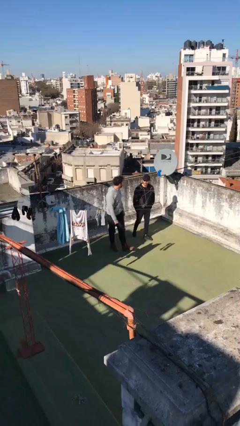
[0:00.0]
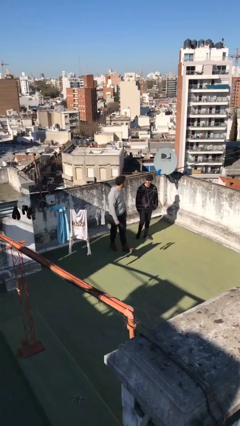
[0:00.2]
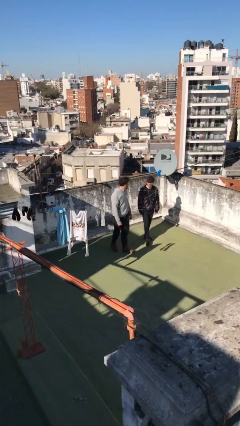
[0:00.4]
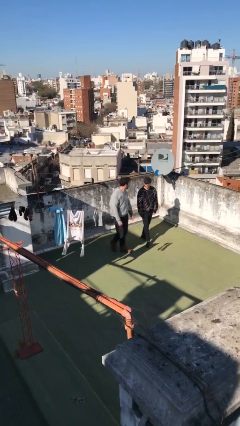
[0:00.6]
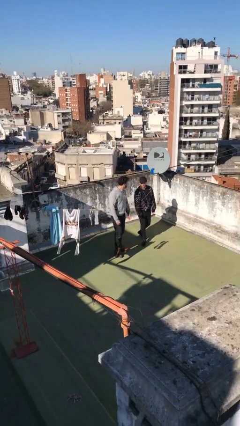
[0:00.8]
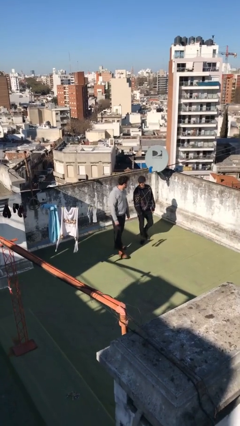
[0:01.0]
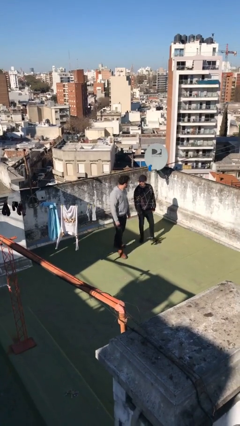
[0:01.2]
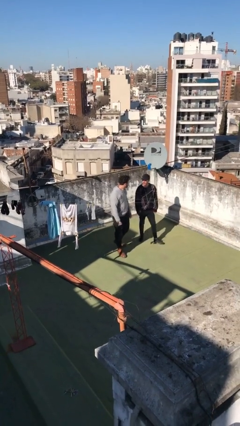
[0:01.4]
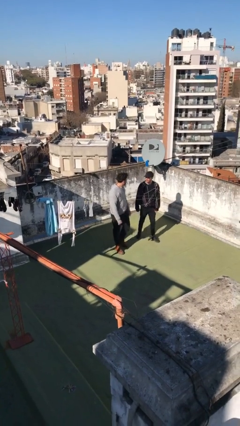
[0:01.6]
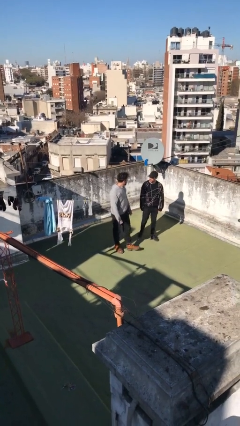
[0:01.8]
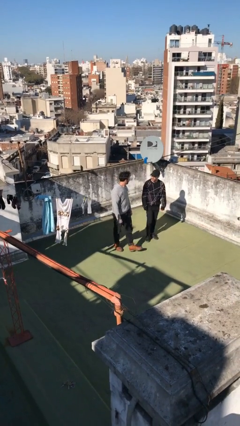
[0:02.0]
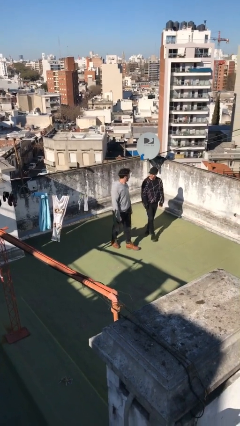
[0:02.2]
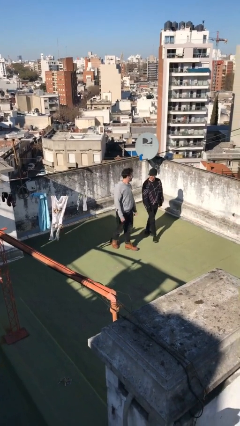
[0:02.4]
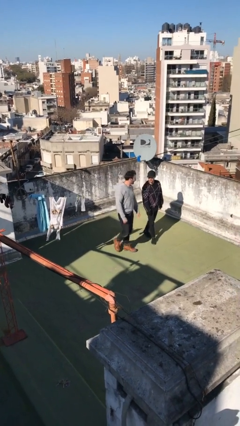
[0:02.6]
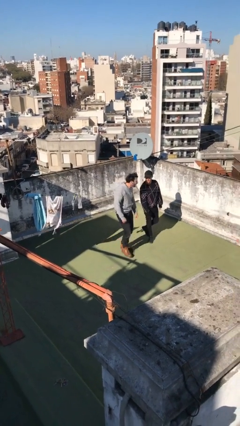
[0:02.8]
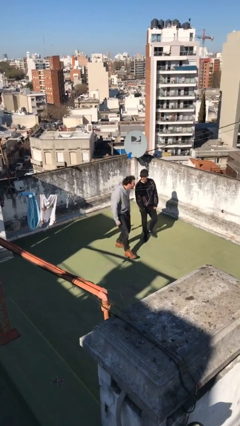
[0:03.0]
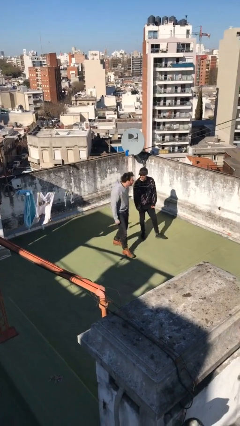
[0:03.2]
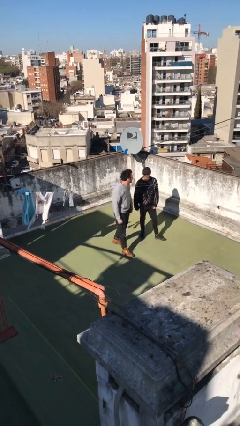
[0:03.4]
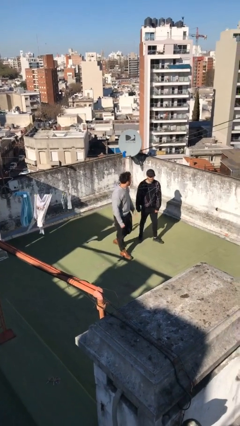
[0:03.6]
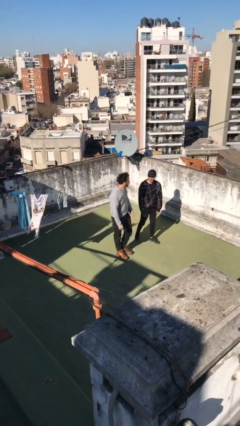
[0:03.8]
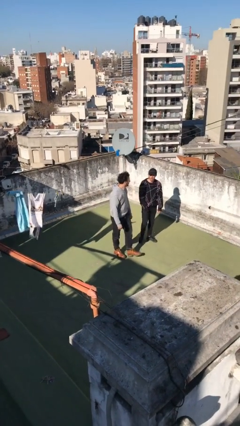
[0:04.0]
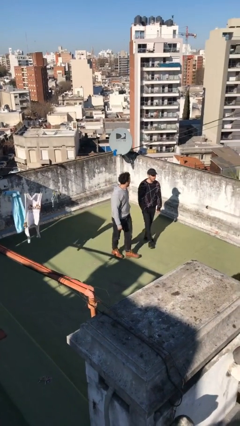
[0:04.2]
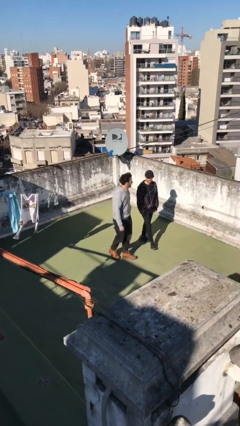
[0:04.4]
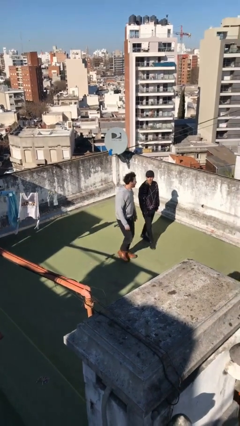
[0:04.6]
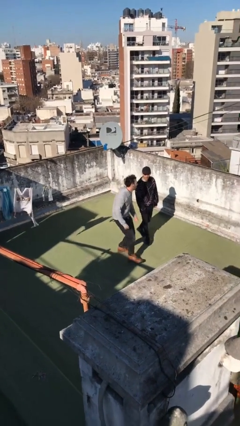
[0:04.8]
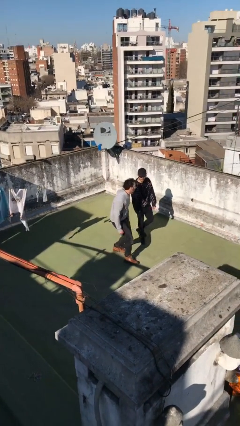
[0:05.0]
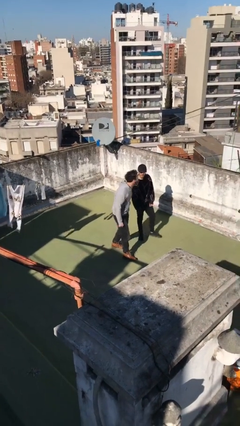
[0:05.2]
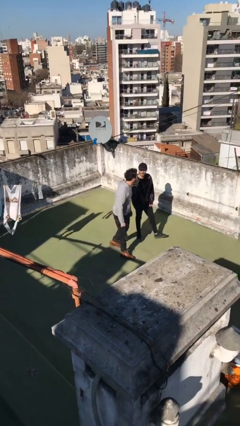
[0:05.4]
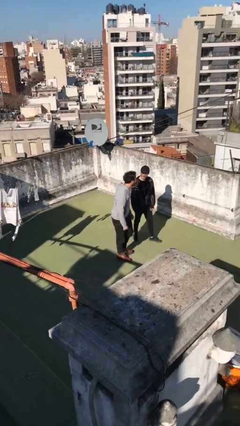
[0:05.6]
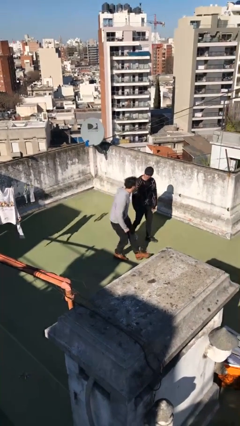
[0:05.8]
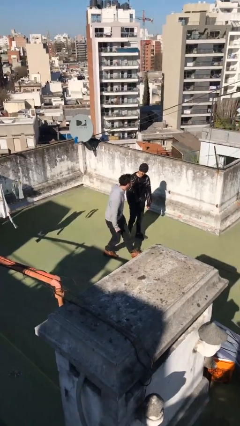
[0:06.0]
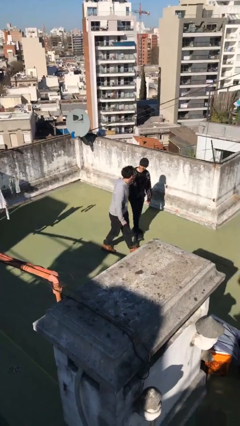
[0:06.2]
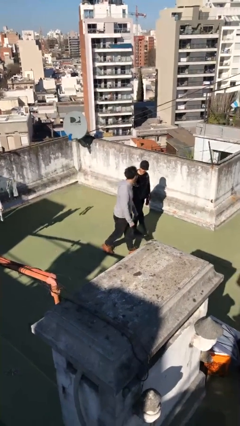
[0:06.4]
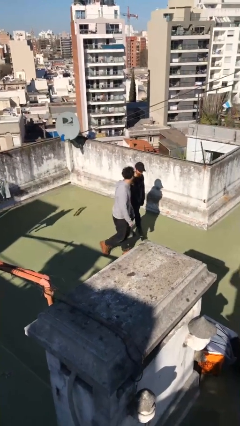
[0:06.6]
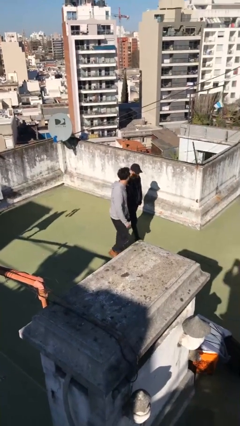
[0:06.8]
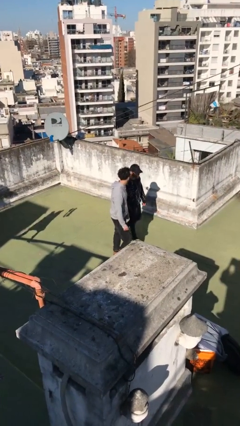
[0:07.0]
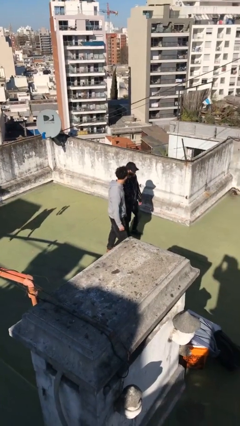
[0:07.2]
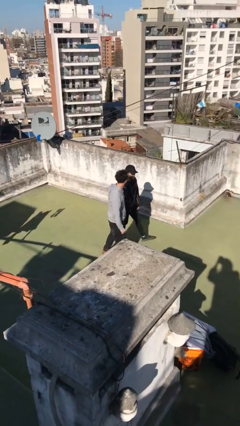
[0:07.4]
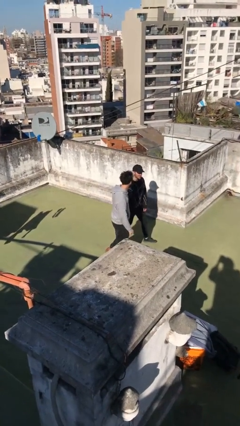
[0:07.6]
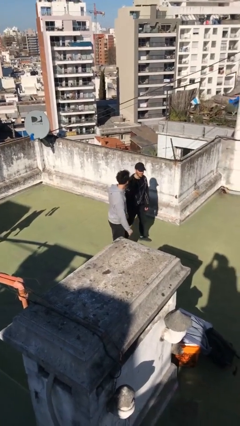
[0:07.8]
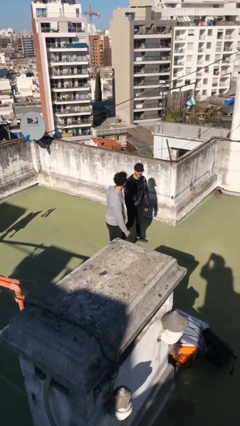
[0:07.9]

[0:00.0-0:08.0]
person talks to person

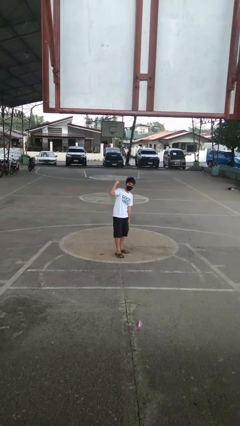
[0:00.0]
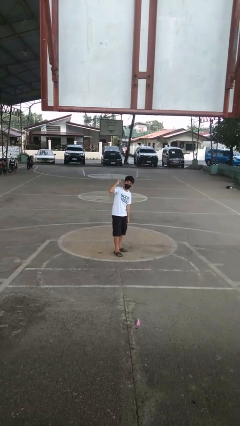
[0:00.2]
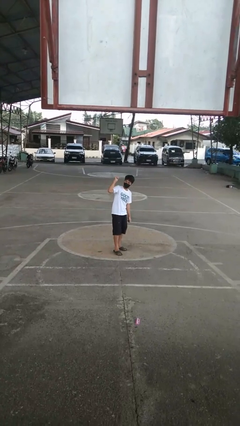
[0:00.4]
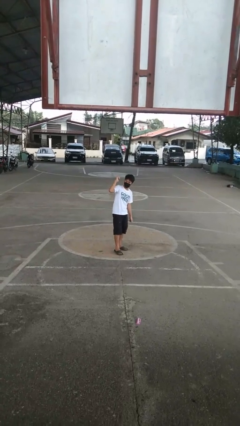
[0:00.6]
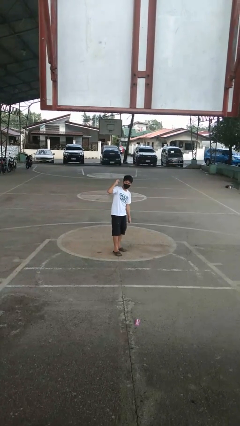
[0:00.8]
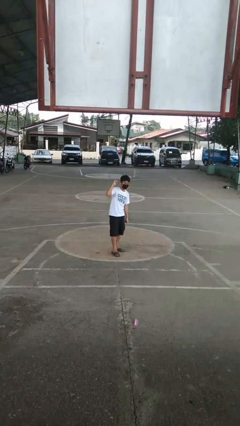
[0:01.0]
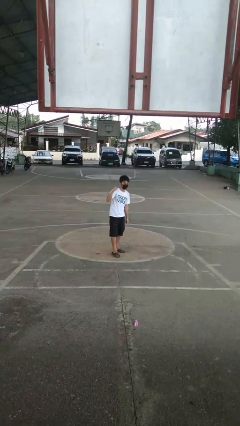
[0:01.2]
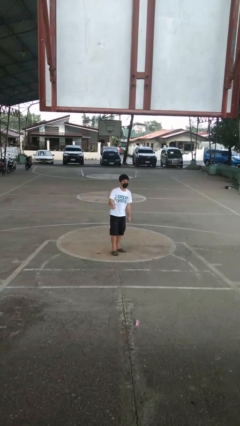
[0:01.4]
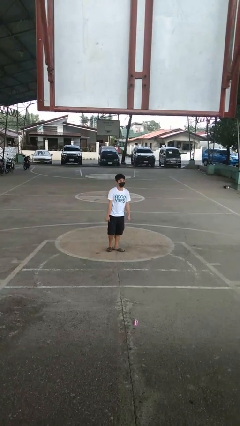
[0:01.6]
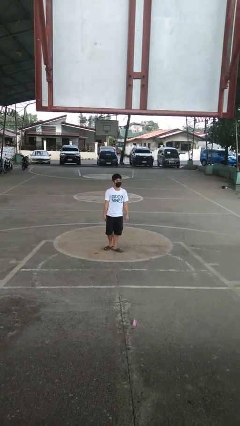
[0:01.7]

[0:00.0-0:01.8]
person gestures behind me

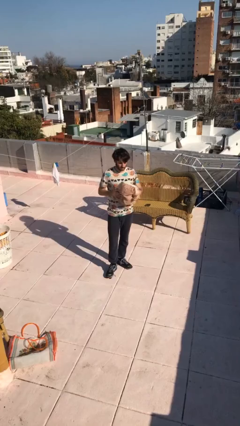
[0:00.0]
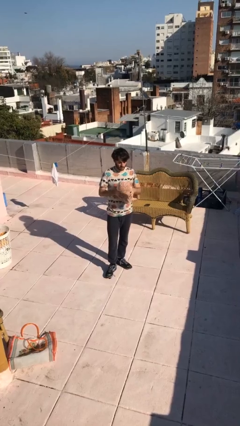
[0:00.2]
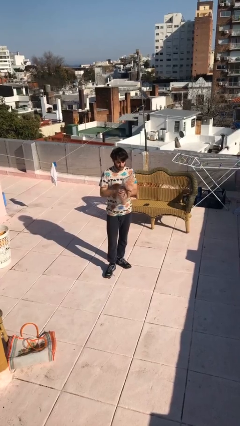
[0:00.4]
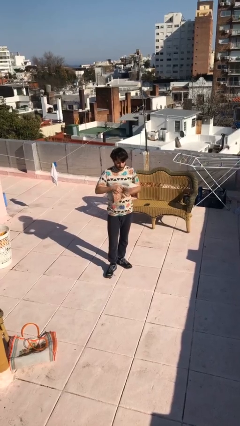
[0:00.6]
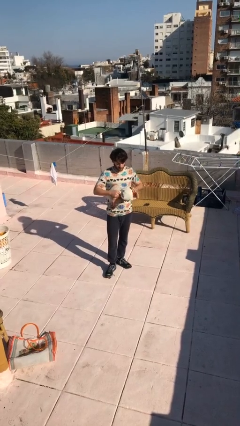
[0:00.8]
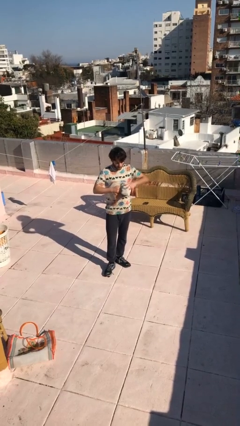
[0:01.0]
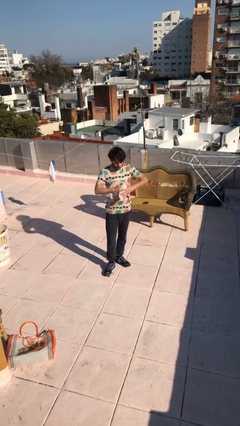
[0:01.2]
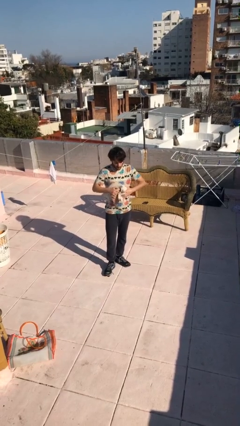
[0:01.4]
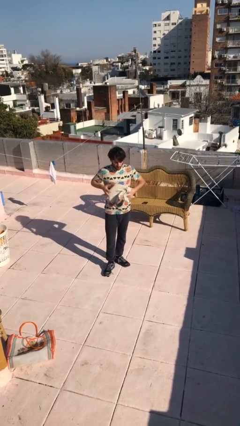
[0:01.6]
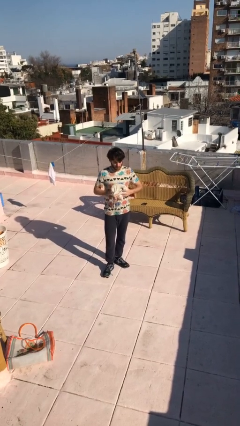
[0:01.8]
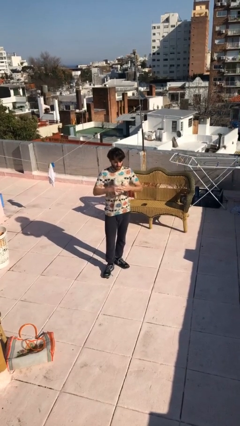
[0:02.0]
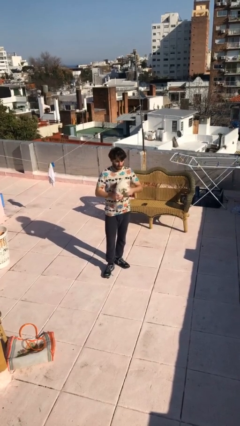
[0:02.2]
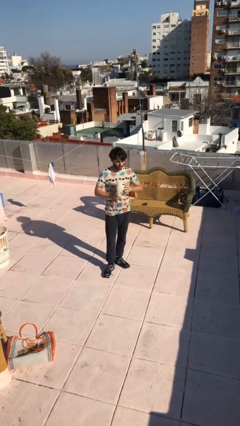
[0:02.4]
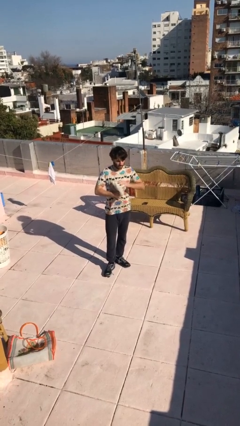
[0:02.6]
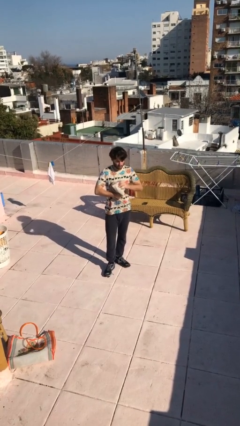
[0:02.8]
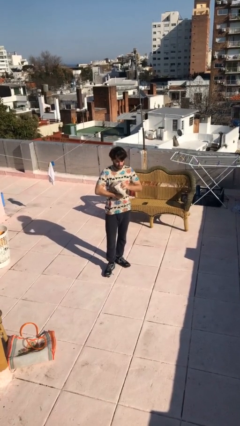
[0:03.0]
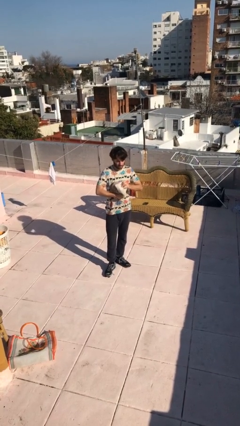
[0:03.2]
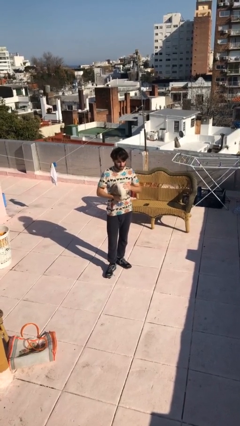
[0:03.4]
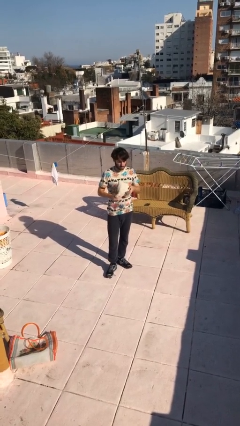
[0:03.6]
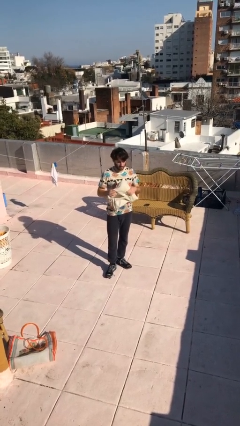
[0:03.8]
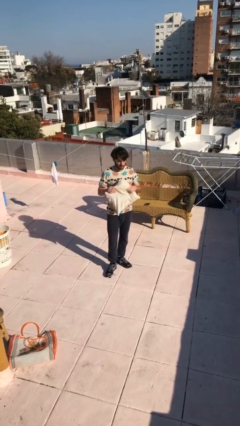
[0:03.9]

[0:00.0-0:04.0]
person squeezes object

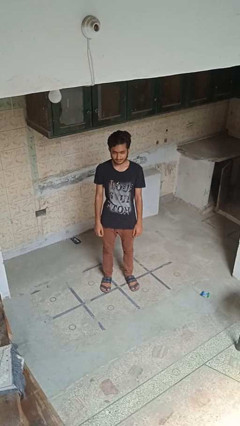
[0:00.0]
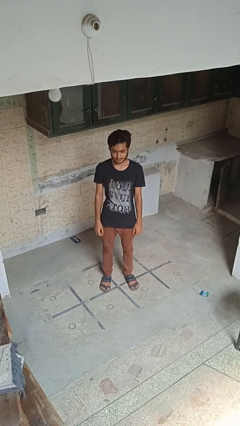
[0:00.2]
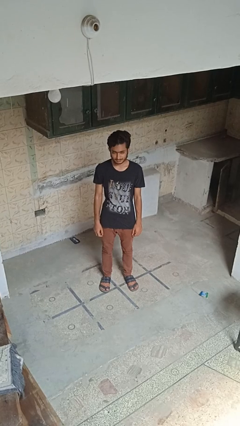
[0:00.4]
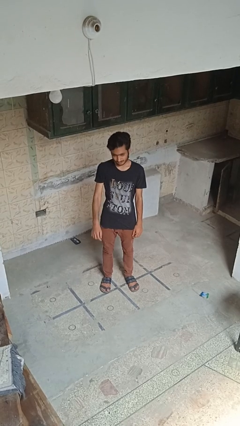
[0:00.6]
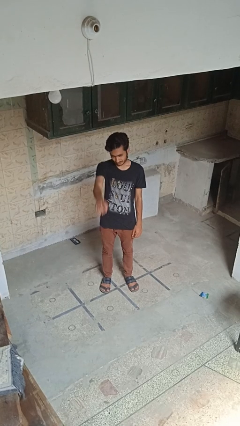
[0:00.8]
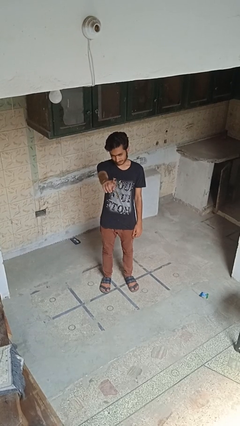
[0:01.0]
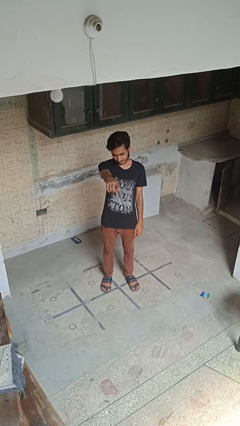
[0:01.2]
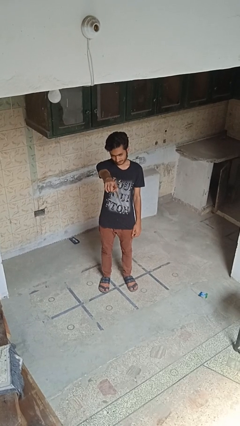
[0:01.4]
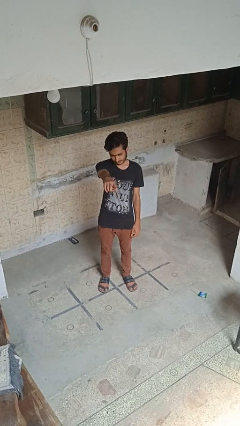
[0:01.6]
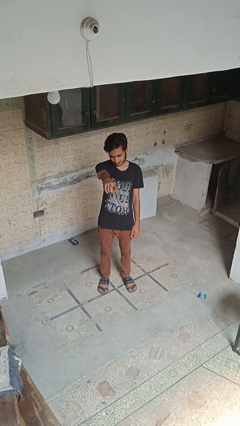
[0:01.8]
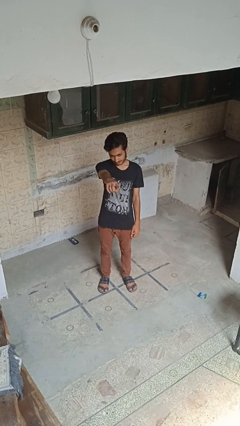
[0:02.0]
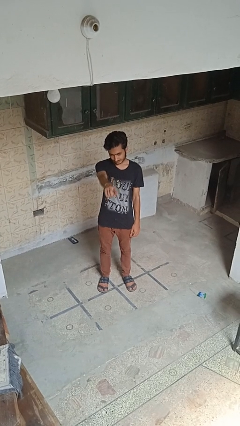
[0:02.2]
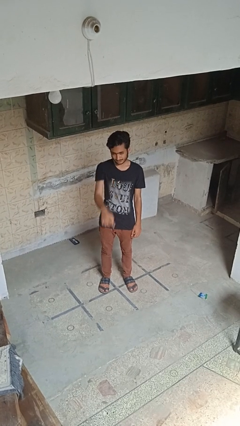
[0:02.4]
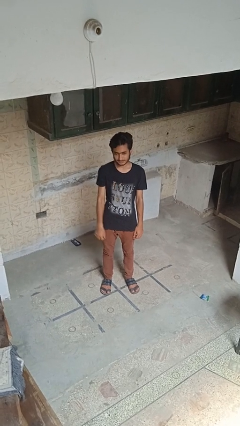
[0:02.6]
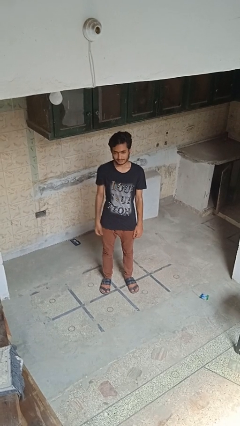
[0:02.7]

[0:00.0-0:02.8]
person points at person

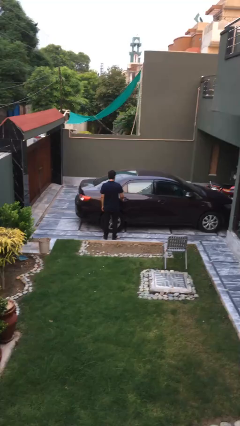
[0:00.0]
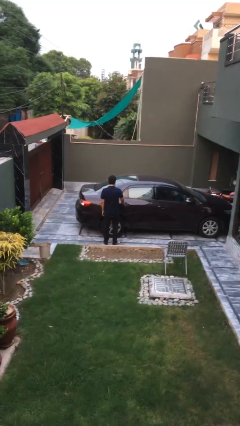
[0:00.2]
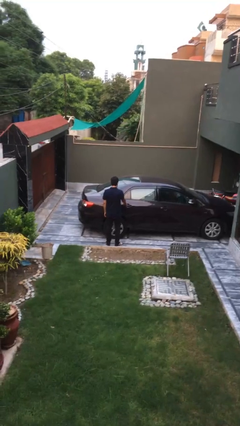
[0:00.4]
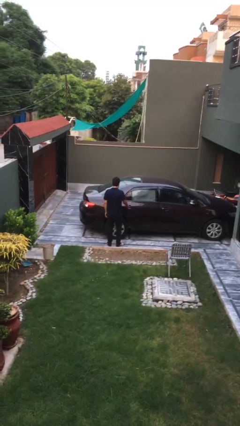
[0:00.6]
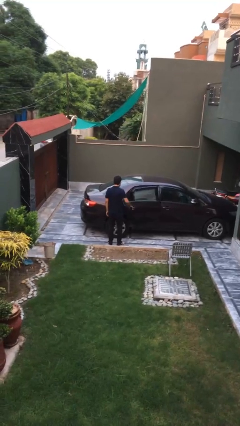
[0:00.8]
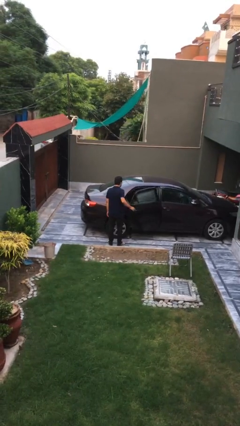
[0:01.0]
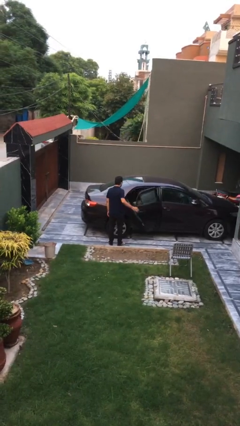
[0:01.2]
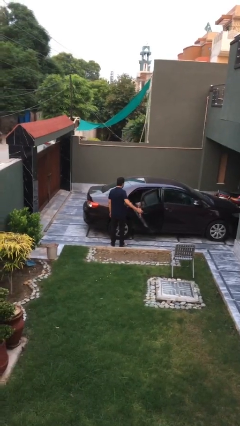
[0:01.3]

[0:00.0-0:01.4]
person opens car door
